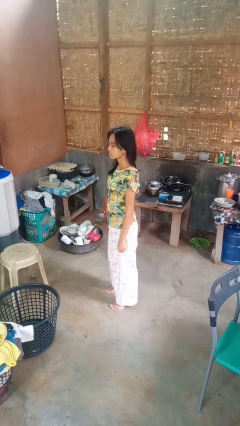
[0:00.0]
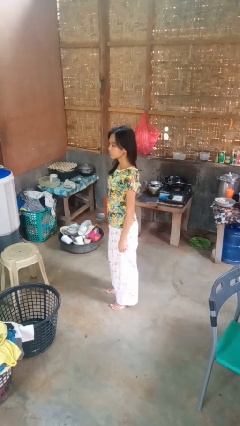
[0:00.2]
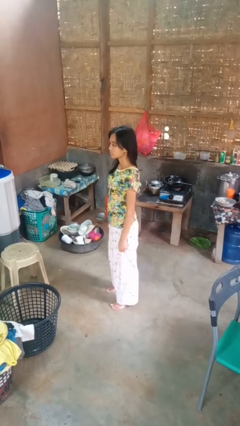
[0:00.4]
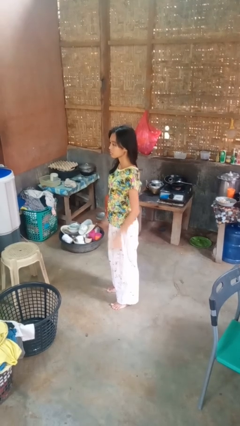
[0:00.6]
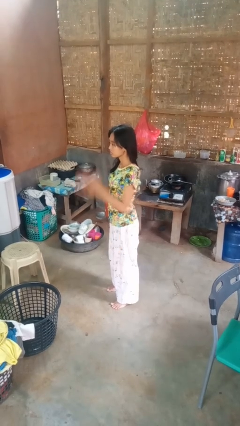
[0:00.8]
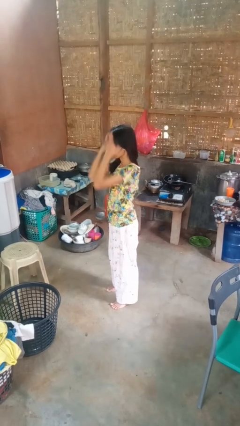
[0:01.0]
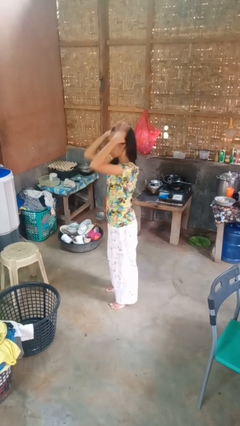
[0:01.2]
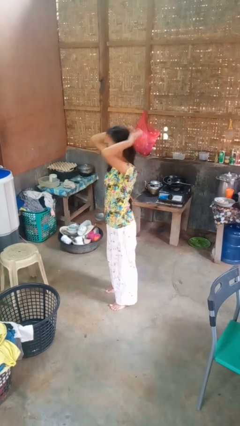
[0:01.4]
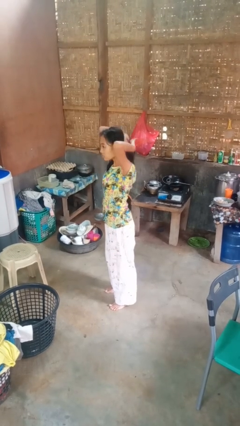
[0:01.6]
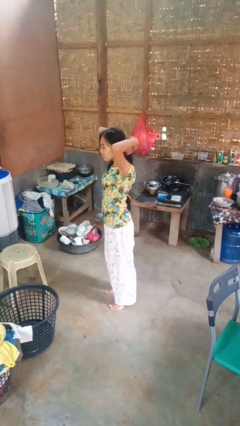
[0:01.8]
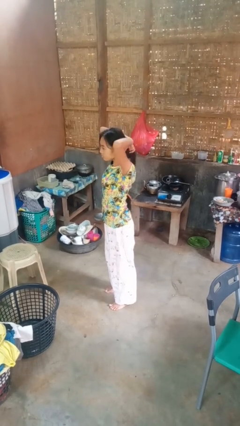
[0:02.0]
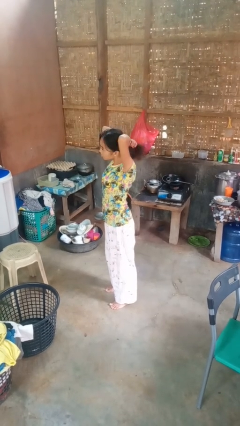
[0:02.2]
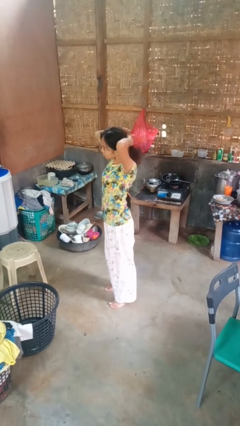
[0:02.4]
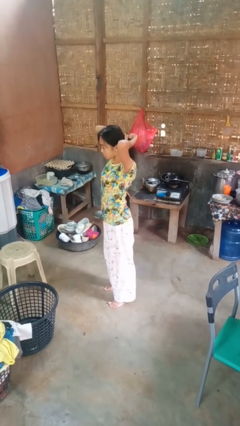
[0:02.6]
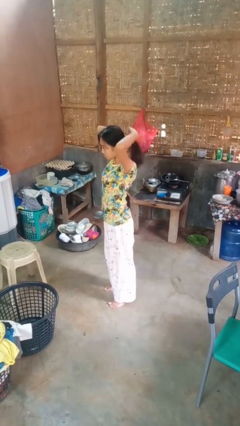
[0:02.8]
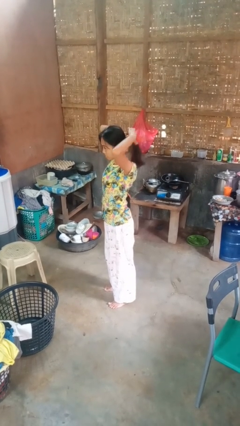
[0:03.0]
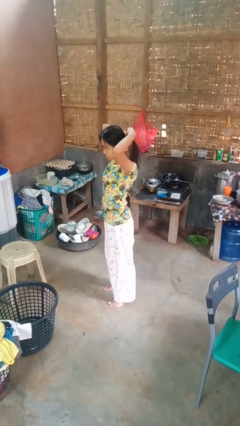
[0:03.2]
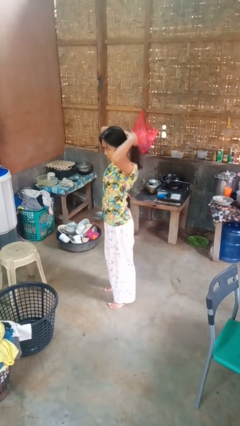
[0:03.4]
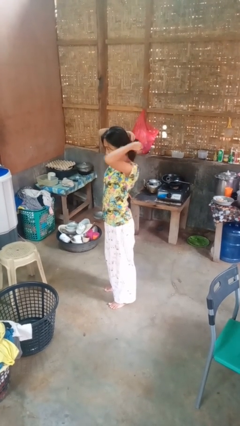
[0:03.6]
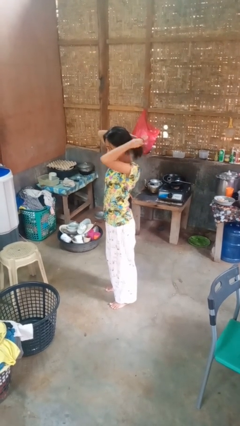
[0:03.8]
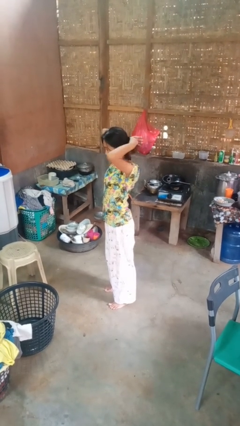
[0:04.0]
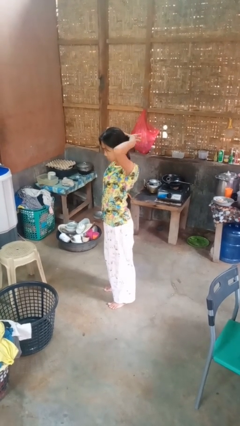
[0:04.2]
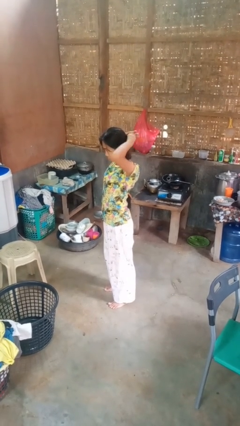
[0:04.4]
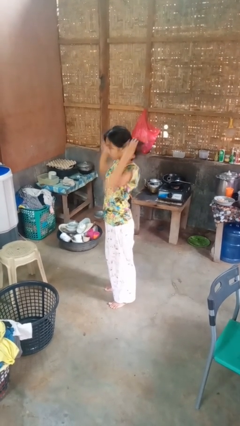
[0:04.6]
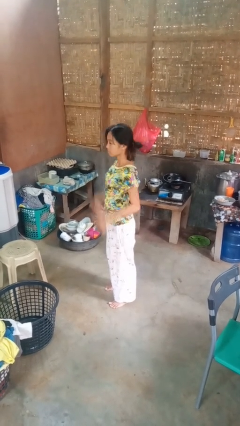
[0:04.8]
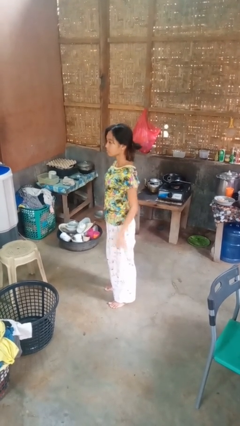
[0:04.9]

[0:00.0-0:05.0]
person puts hair in ponytail

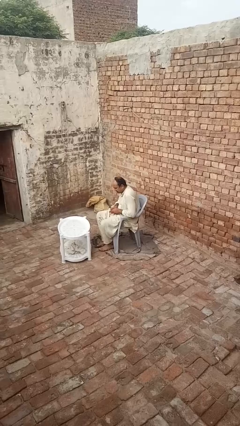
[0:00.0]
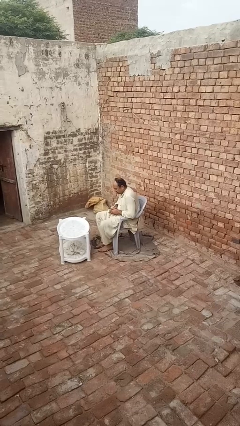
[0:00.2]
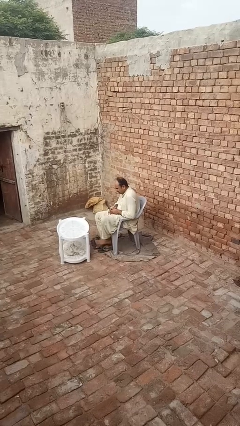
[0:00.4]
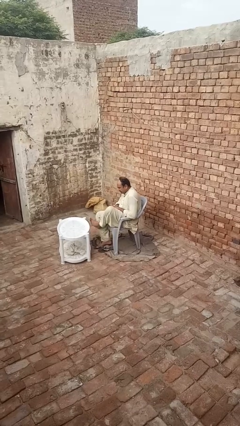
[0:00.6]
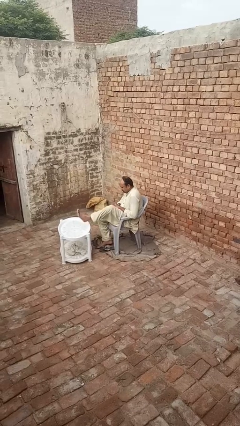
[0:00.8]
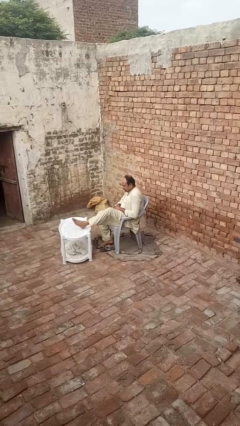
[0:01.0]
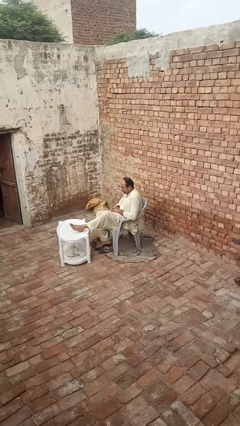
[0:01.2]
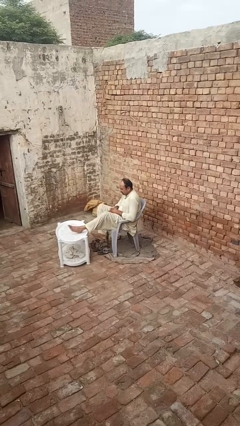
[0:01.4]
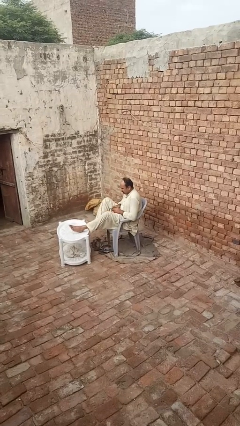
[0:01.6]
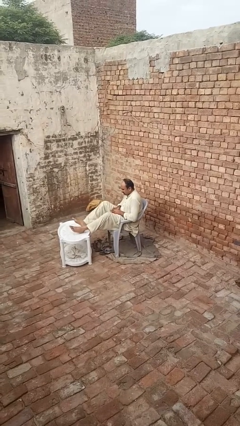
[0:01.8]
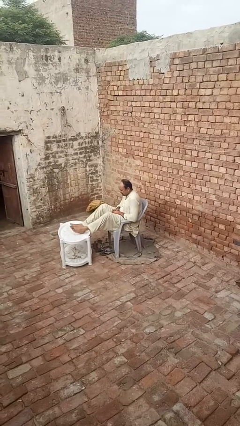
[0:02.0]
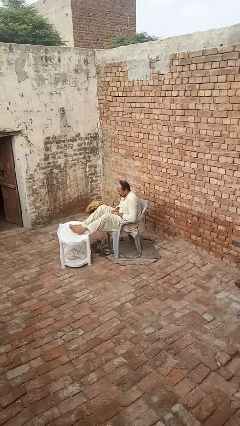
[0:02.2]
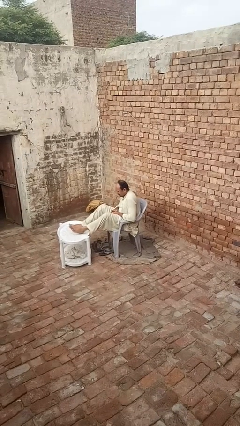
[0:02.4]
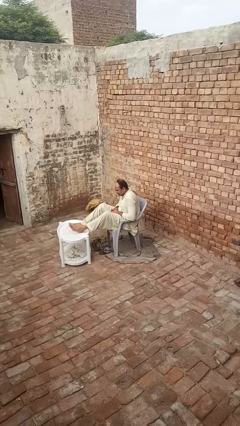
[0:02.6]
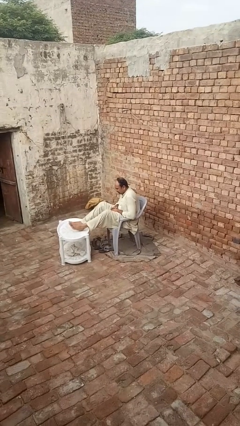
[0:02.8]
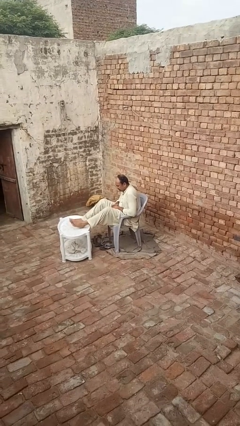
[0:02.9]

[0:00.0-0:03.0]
person puts feet up

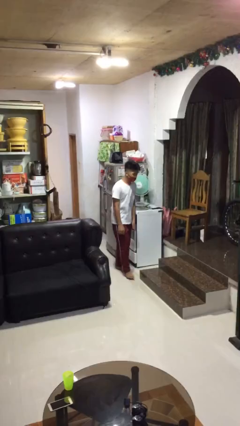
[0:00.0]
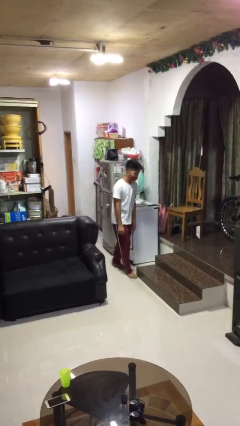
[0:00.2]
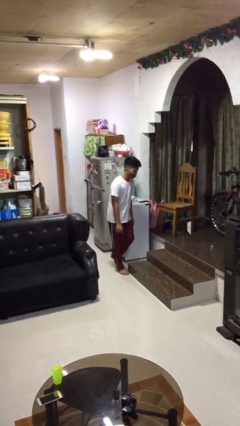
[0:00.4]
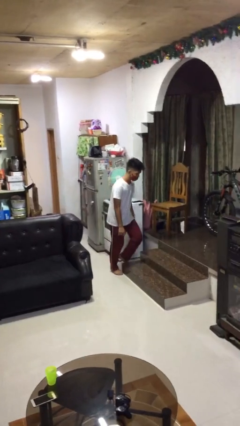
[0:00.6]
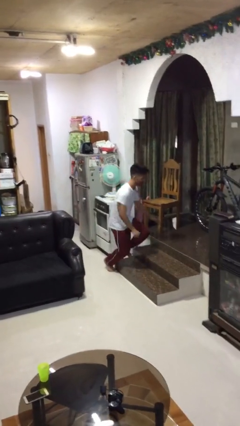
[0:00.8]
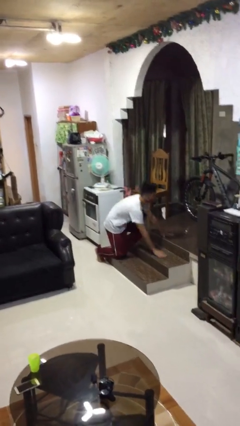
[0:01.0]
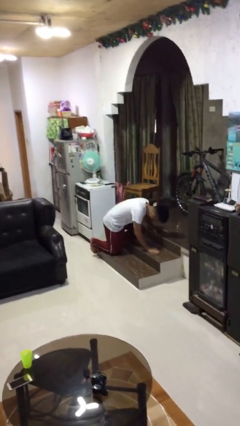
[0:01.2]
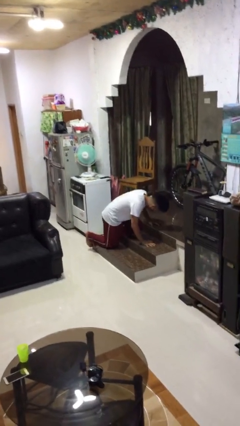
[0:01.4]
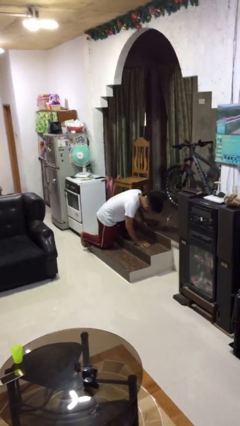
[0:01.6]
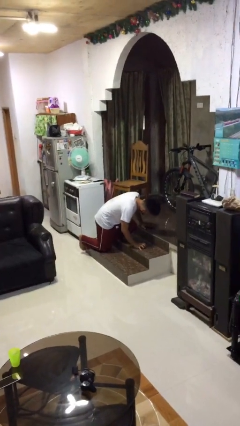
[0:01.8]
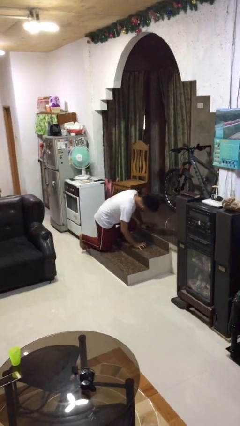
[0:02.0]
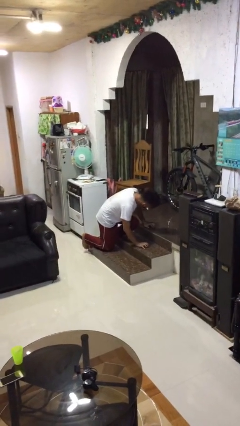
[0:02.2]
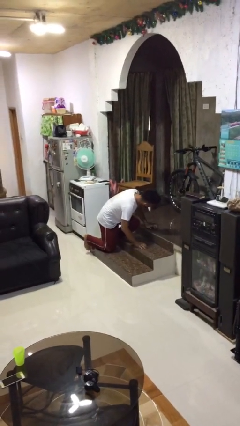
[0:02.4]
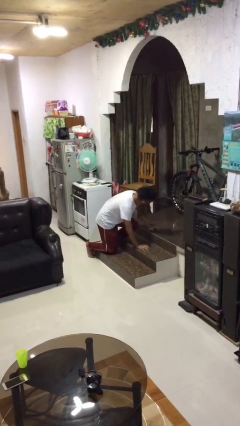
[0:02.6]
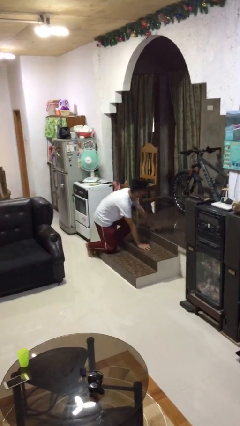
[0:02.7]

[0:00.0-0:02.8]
person trips on object on floor

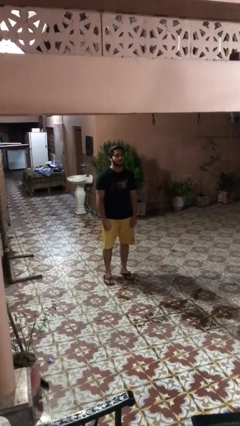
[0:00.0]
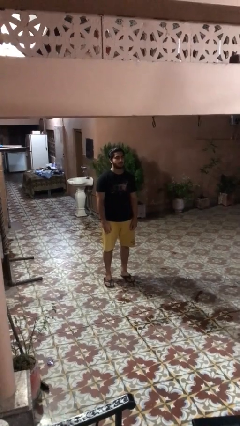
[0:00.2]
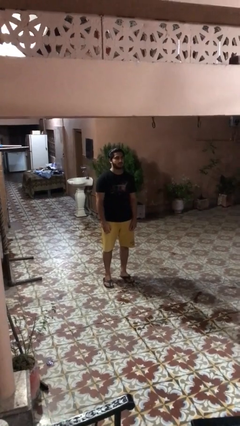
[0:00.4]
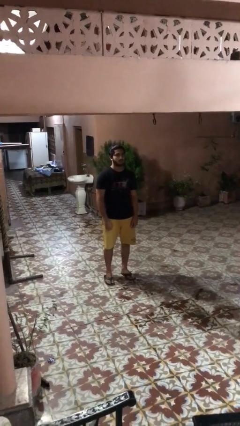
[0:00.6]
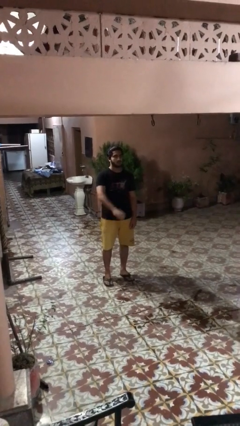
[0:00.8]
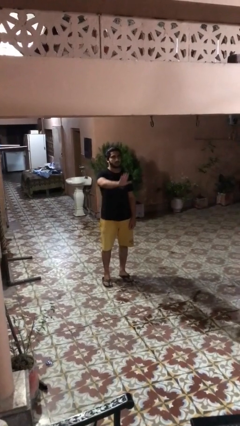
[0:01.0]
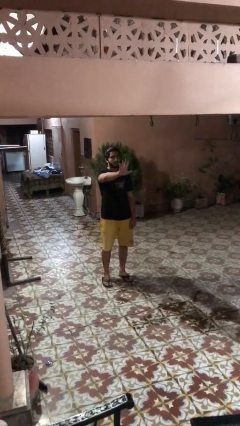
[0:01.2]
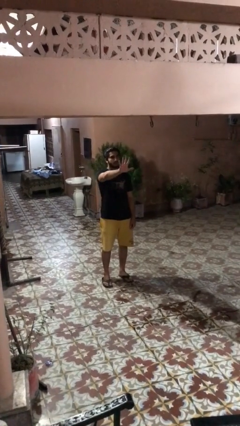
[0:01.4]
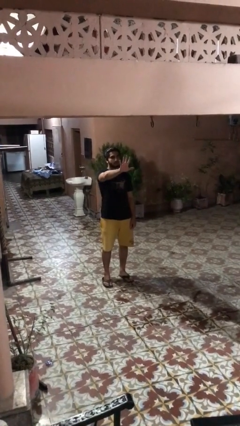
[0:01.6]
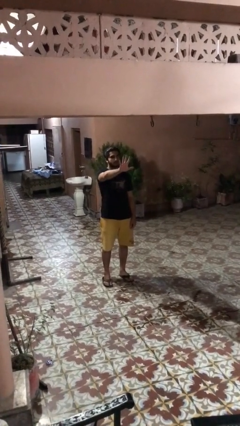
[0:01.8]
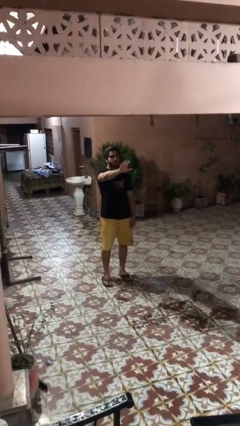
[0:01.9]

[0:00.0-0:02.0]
person gestures number five

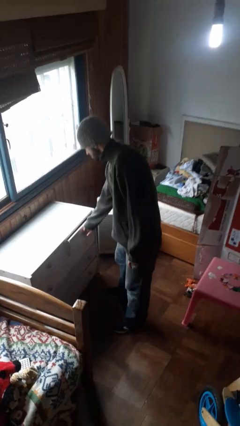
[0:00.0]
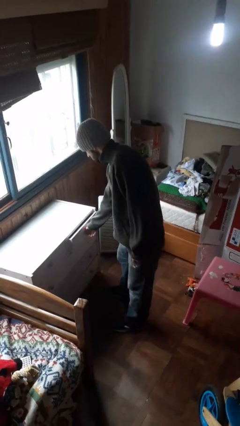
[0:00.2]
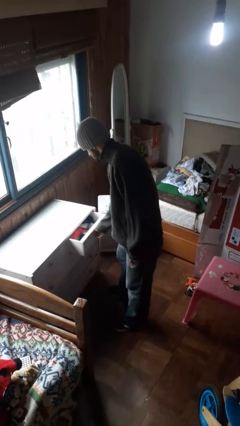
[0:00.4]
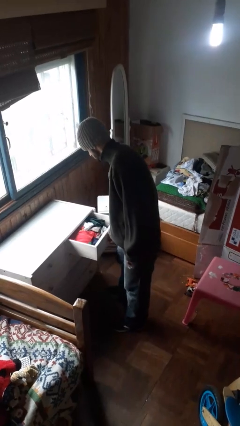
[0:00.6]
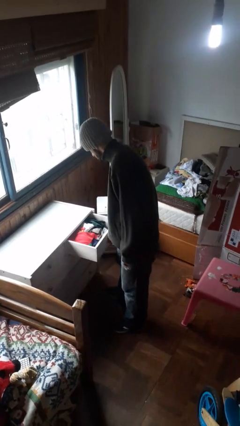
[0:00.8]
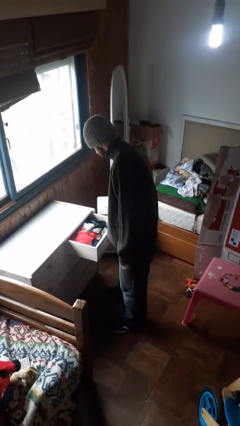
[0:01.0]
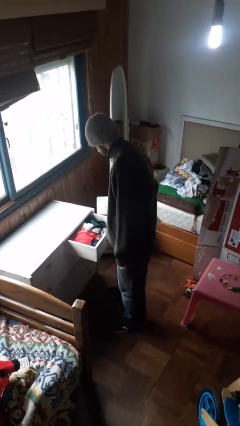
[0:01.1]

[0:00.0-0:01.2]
person opens dresser drawer

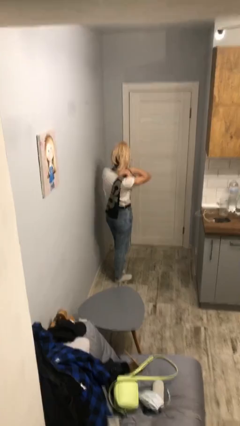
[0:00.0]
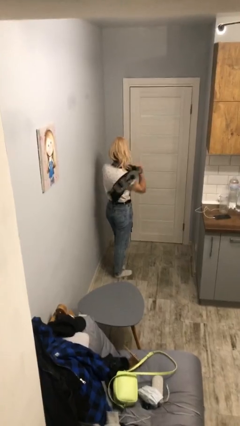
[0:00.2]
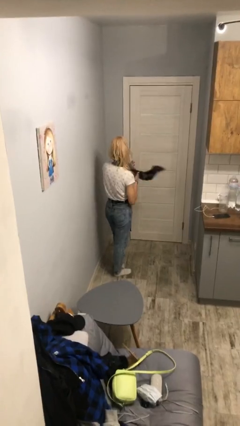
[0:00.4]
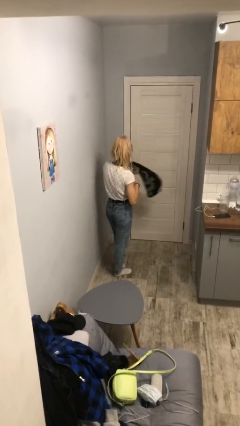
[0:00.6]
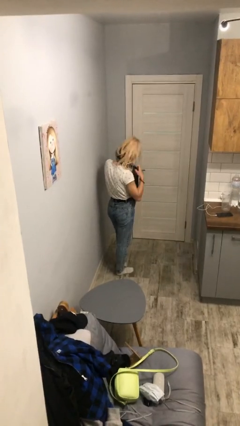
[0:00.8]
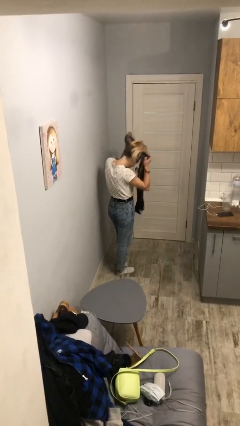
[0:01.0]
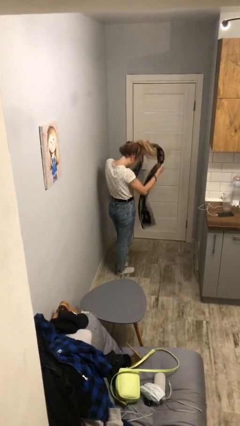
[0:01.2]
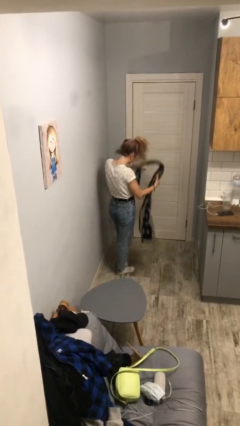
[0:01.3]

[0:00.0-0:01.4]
person takes off scarf

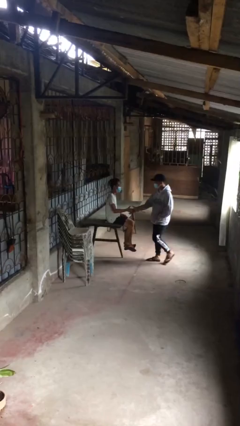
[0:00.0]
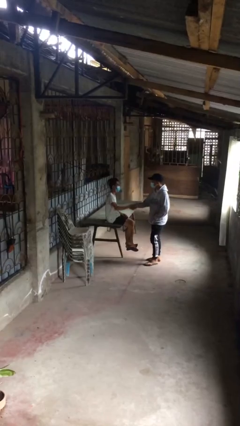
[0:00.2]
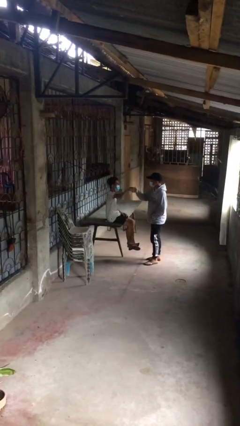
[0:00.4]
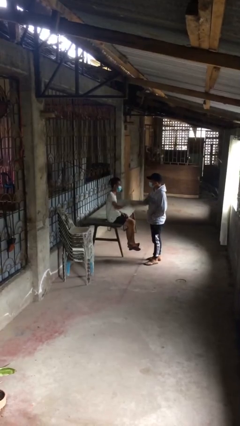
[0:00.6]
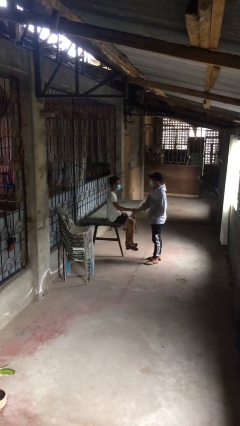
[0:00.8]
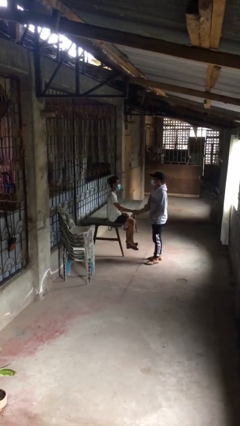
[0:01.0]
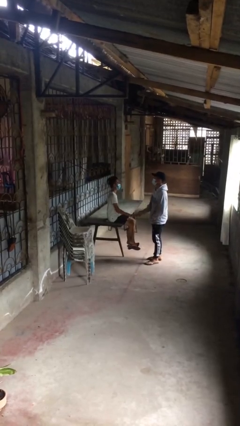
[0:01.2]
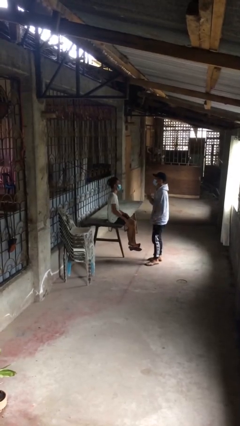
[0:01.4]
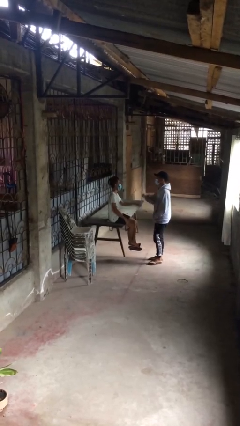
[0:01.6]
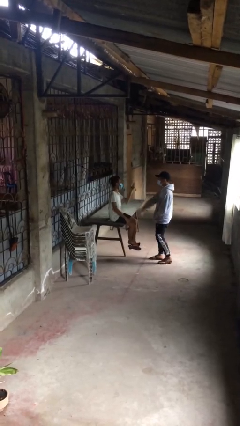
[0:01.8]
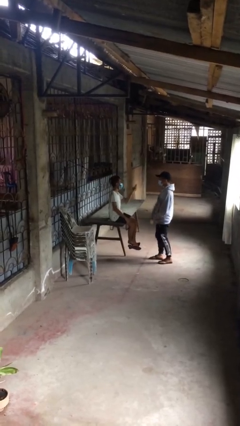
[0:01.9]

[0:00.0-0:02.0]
person shakes hand
